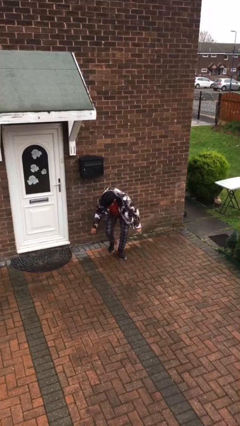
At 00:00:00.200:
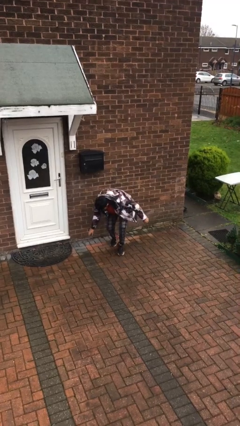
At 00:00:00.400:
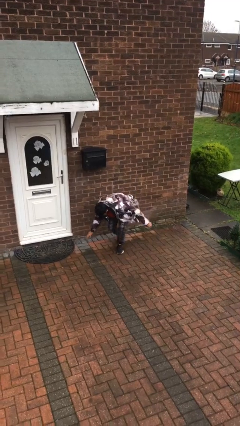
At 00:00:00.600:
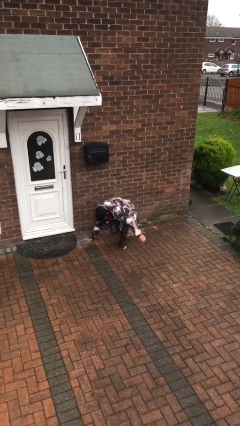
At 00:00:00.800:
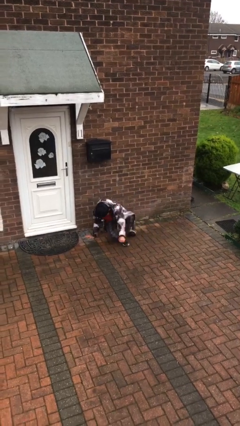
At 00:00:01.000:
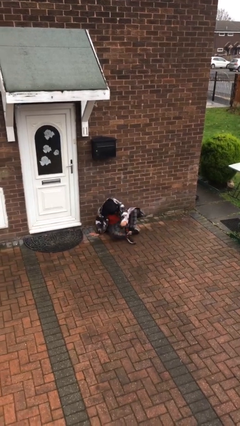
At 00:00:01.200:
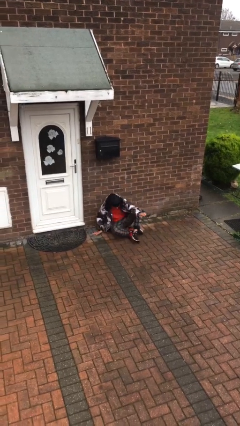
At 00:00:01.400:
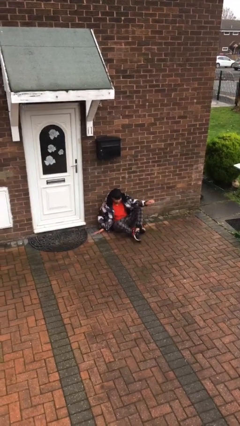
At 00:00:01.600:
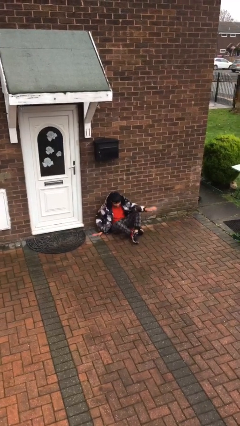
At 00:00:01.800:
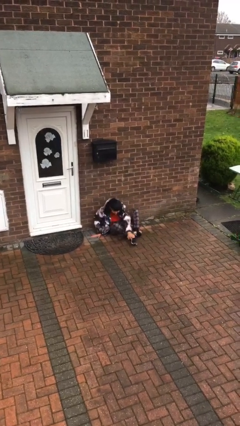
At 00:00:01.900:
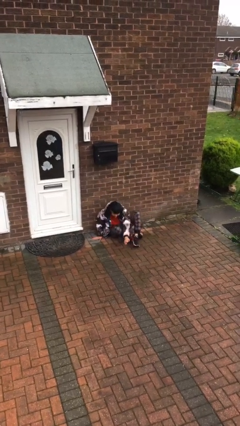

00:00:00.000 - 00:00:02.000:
person sits down

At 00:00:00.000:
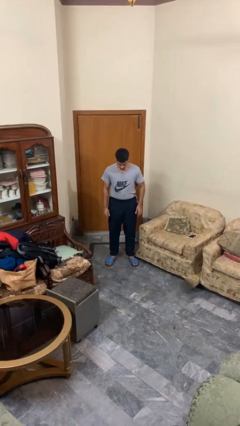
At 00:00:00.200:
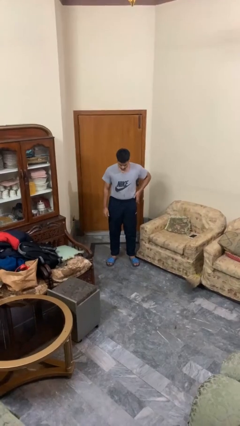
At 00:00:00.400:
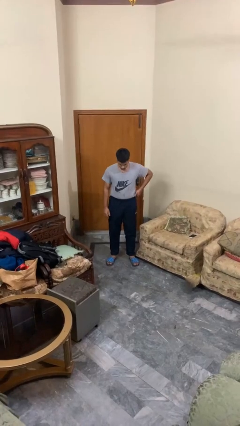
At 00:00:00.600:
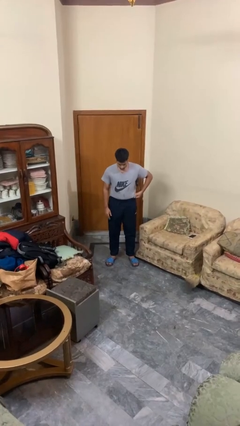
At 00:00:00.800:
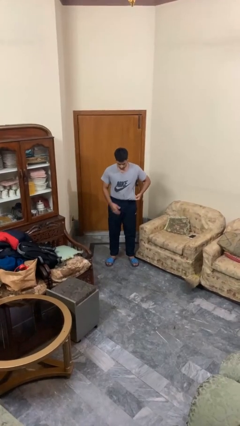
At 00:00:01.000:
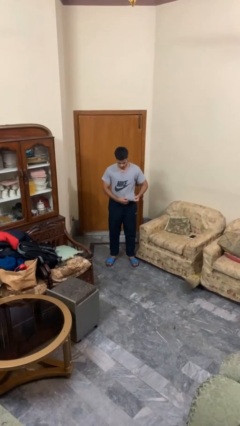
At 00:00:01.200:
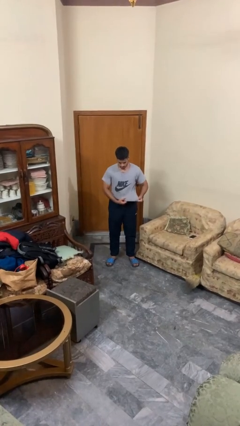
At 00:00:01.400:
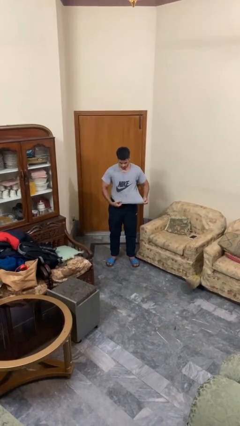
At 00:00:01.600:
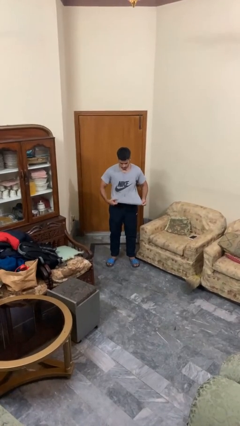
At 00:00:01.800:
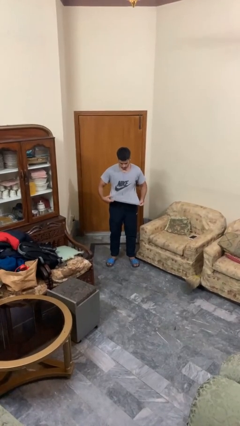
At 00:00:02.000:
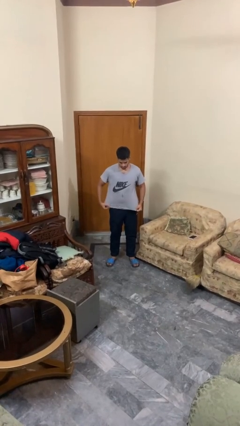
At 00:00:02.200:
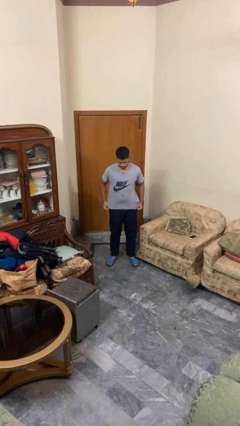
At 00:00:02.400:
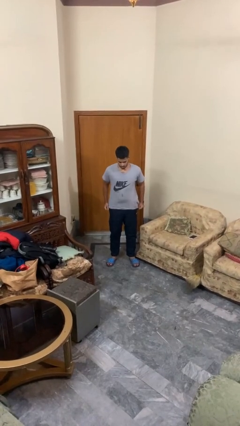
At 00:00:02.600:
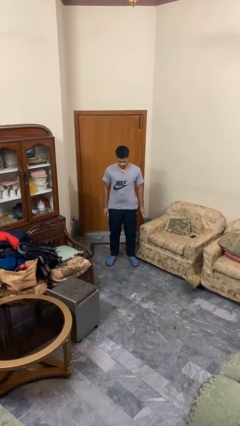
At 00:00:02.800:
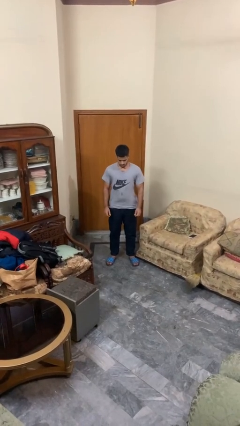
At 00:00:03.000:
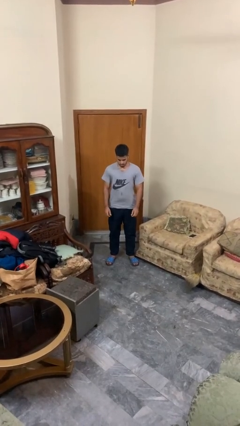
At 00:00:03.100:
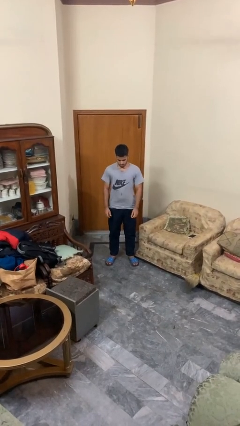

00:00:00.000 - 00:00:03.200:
person untucks shirt

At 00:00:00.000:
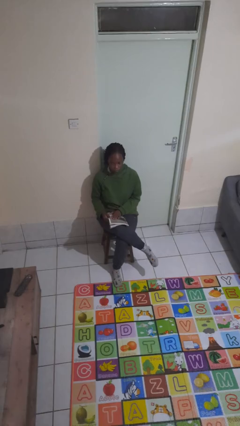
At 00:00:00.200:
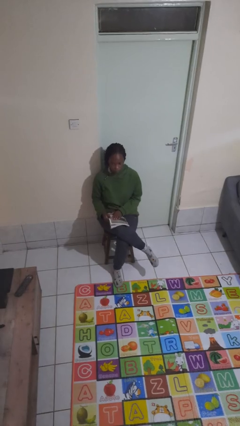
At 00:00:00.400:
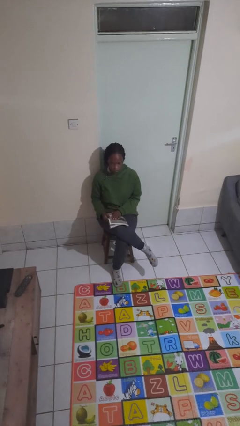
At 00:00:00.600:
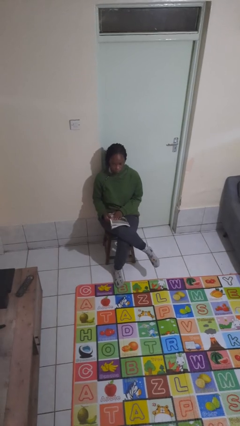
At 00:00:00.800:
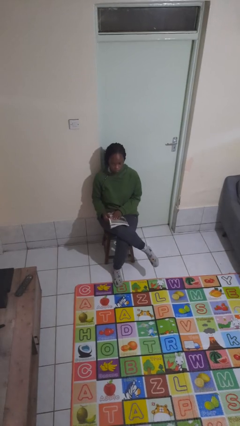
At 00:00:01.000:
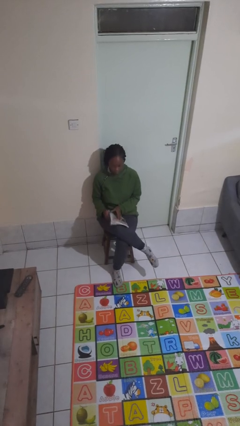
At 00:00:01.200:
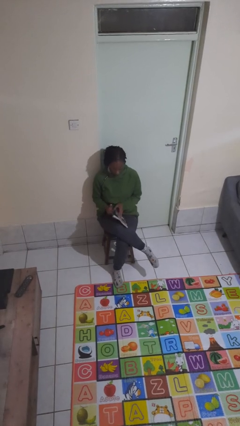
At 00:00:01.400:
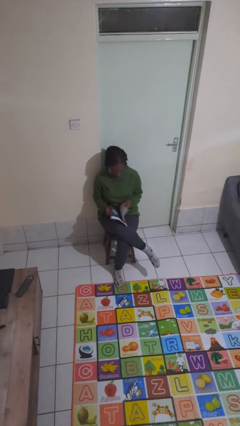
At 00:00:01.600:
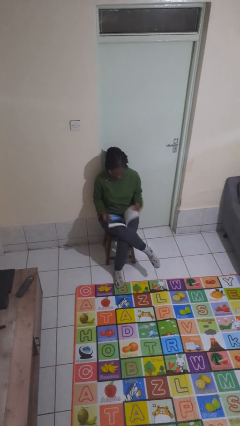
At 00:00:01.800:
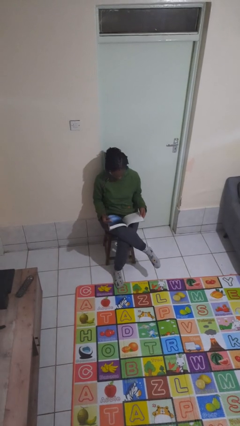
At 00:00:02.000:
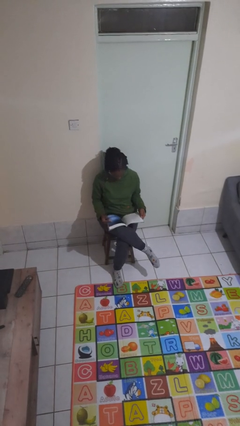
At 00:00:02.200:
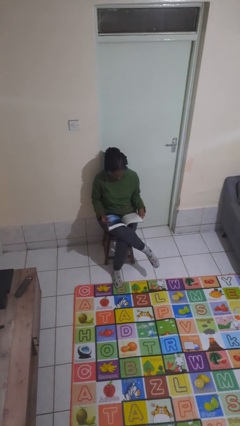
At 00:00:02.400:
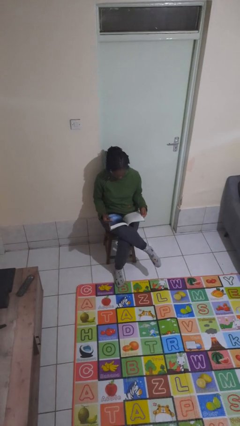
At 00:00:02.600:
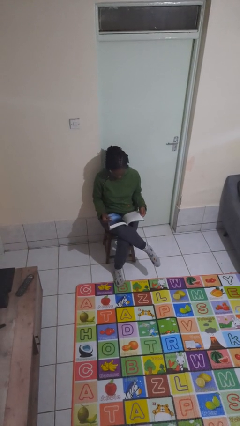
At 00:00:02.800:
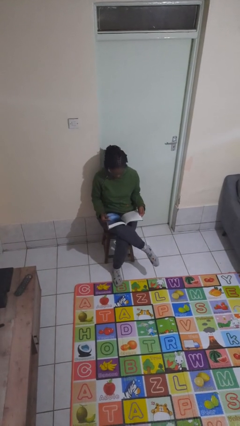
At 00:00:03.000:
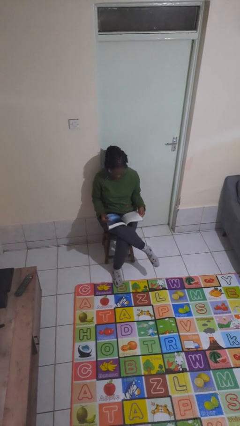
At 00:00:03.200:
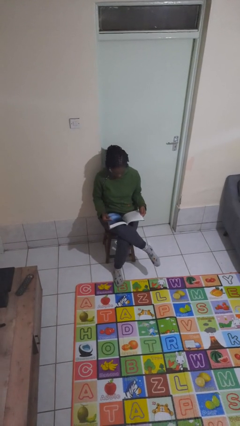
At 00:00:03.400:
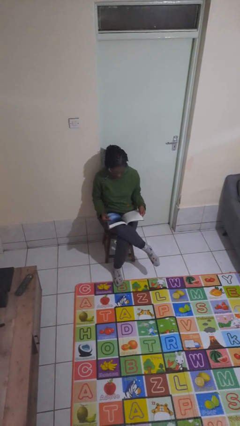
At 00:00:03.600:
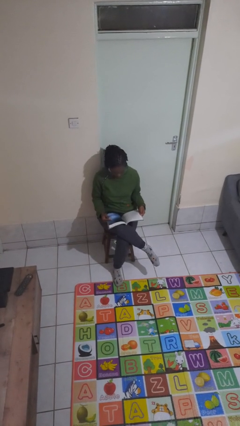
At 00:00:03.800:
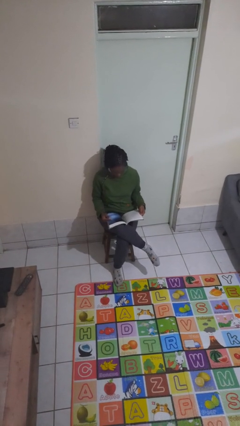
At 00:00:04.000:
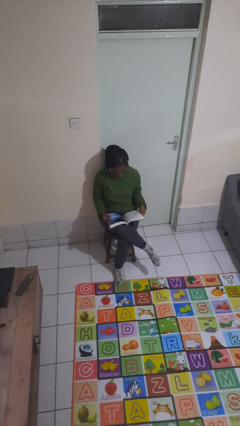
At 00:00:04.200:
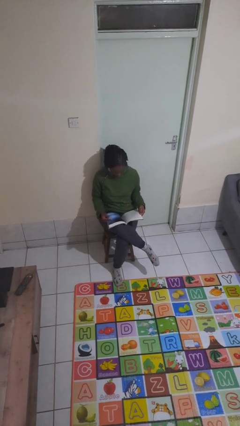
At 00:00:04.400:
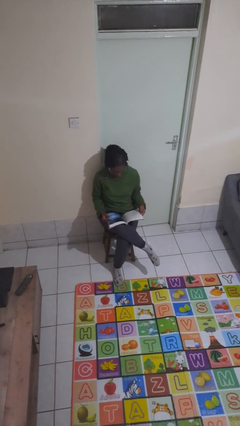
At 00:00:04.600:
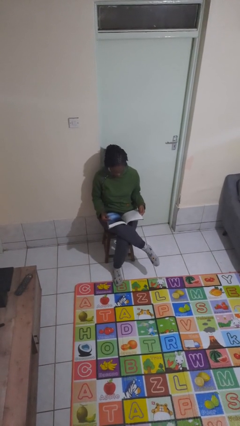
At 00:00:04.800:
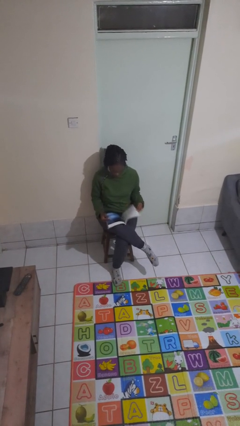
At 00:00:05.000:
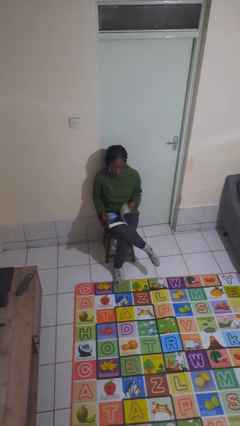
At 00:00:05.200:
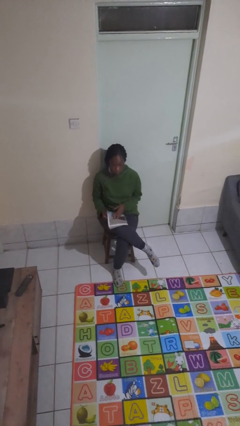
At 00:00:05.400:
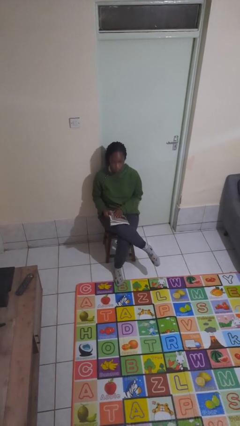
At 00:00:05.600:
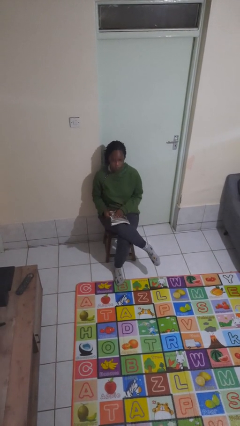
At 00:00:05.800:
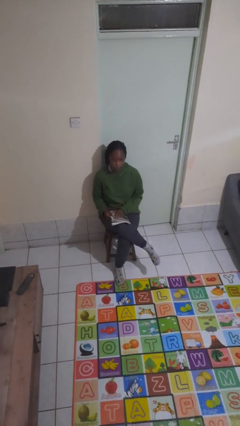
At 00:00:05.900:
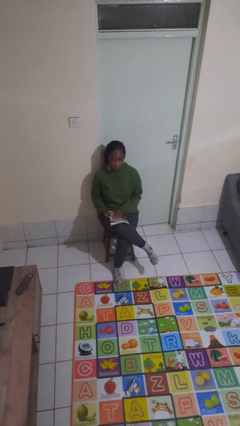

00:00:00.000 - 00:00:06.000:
person reads magazine

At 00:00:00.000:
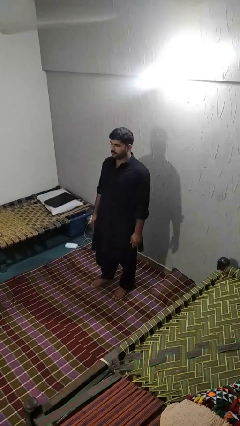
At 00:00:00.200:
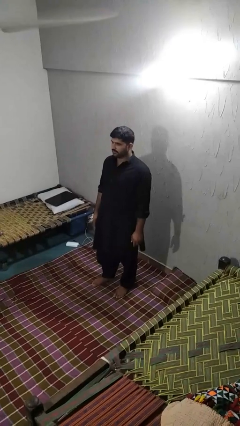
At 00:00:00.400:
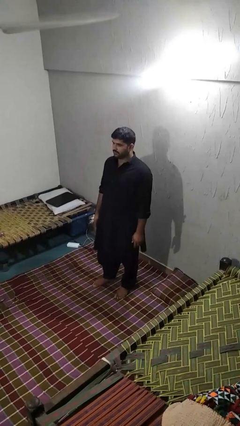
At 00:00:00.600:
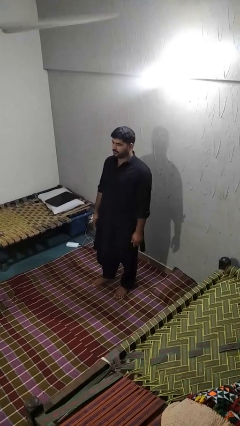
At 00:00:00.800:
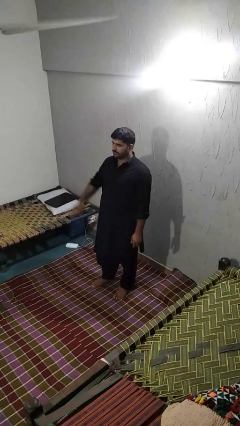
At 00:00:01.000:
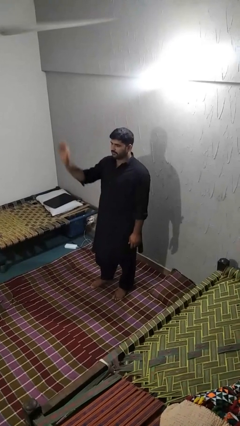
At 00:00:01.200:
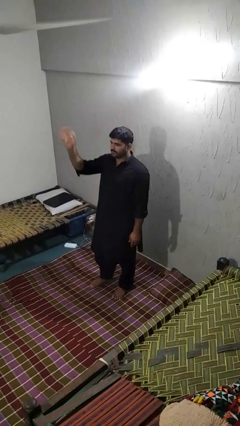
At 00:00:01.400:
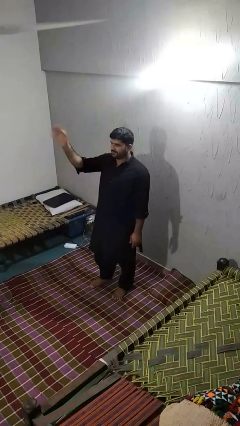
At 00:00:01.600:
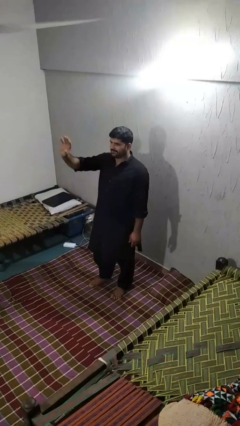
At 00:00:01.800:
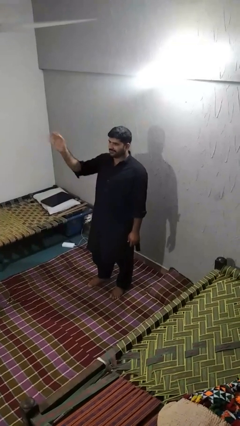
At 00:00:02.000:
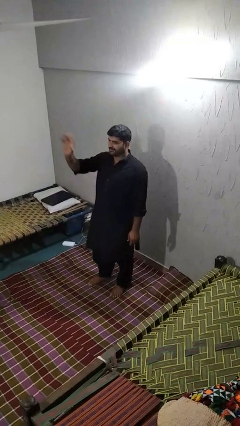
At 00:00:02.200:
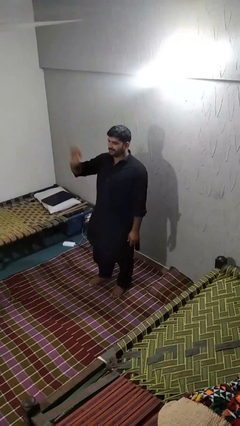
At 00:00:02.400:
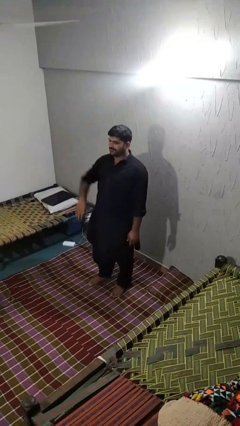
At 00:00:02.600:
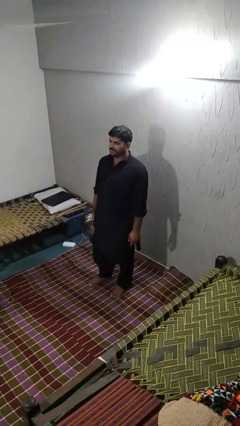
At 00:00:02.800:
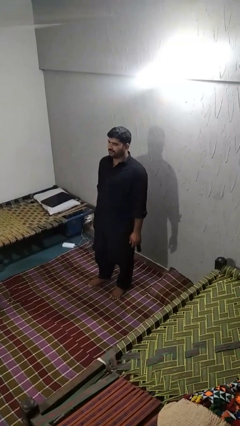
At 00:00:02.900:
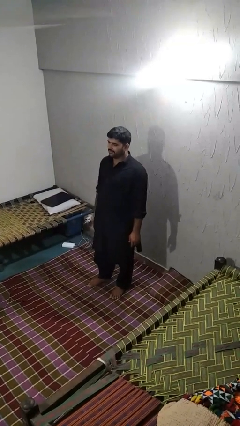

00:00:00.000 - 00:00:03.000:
person waves at person

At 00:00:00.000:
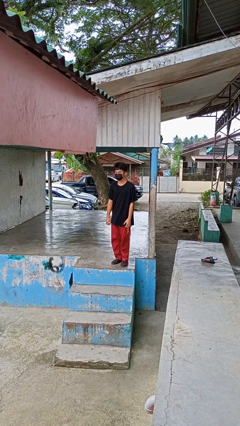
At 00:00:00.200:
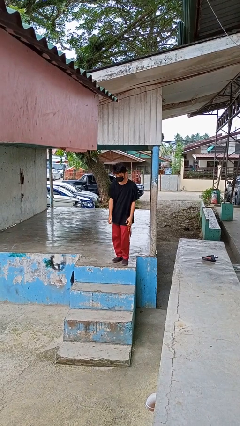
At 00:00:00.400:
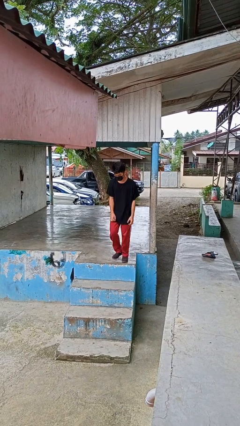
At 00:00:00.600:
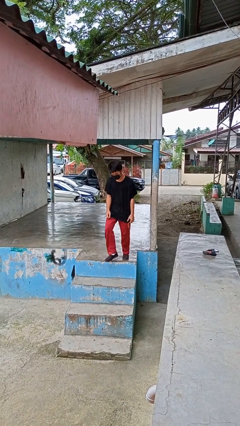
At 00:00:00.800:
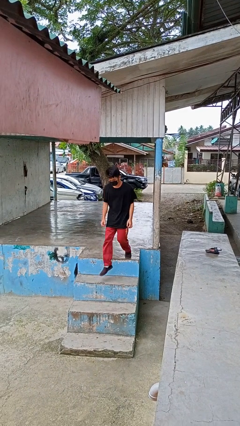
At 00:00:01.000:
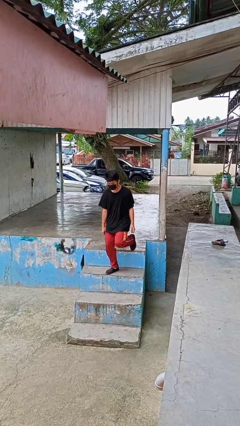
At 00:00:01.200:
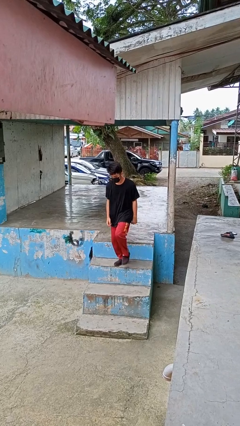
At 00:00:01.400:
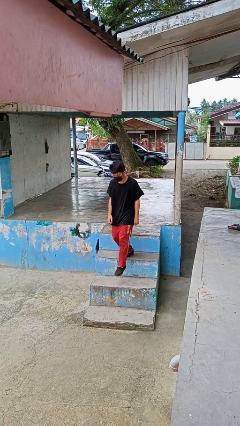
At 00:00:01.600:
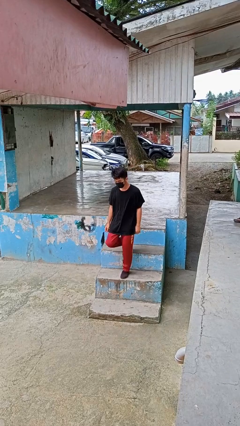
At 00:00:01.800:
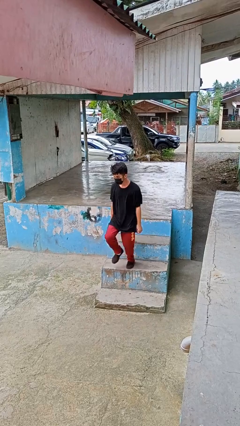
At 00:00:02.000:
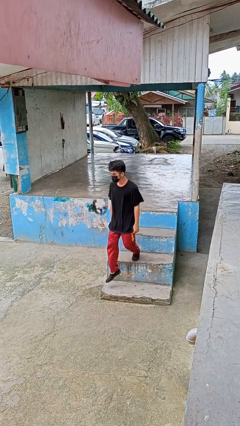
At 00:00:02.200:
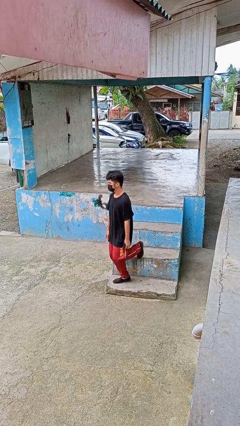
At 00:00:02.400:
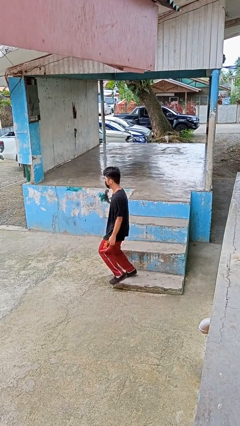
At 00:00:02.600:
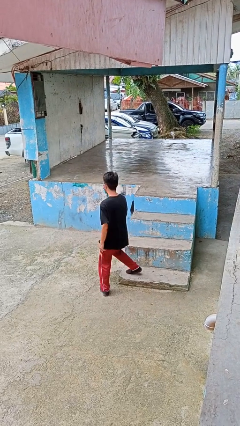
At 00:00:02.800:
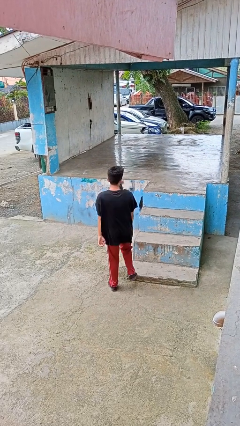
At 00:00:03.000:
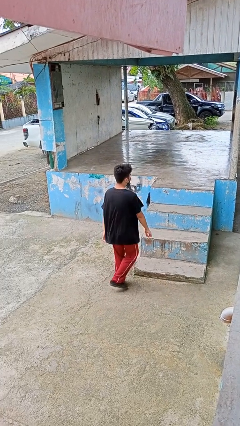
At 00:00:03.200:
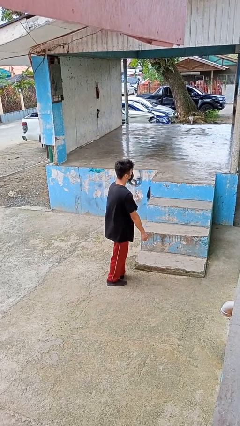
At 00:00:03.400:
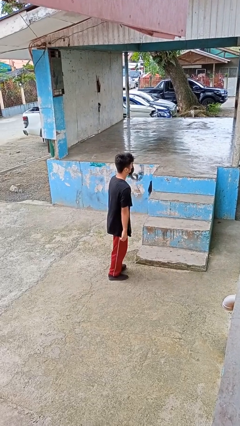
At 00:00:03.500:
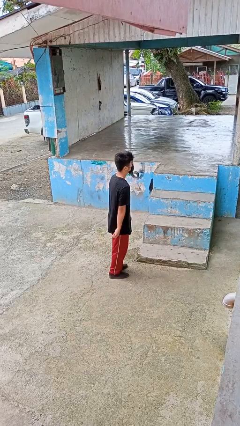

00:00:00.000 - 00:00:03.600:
person climbs down stairs
